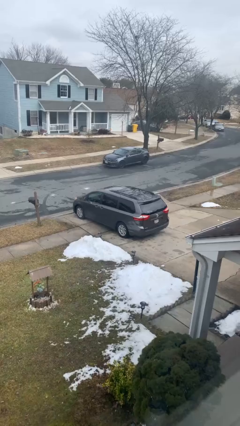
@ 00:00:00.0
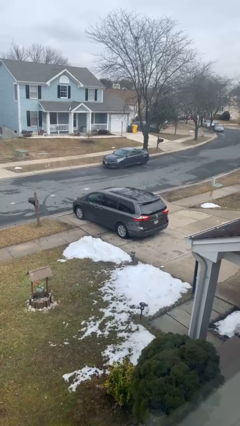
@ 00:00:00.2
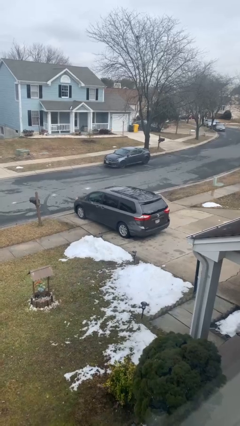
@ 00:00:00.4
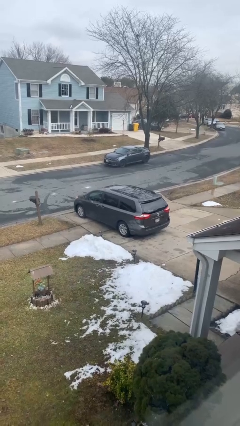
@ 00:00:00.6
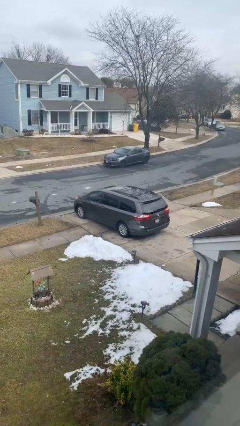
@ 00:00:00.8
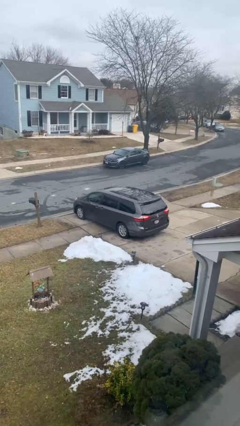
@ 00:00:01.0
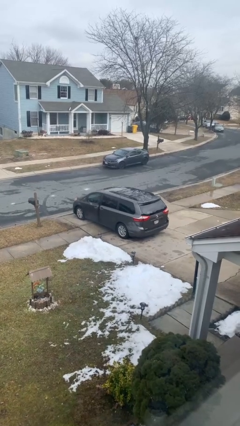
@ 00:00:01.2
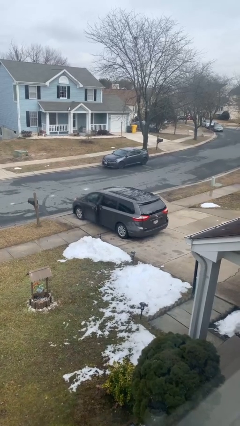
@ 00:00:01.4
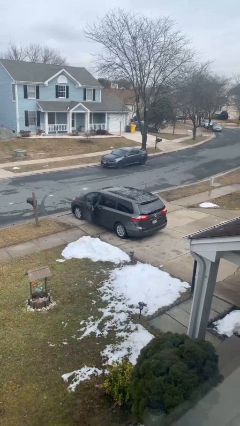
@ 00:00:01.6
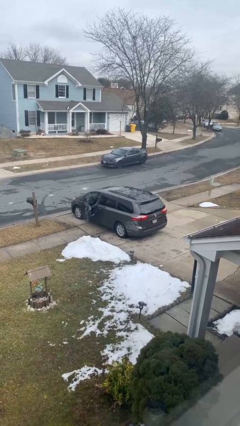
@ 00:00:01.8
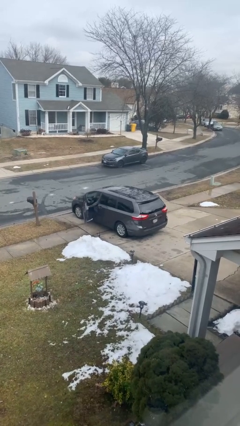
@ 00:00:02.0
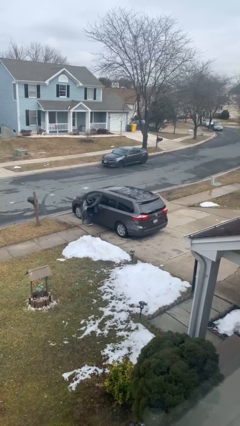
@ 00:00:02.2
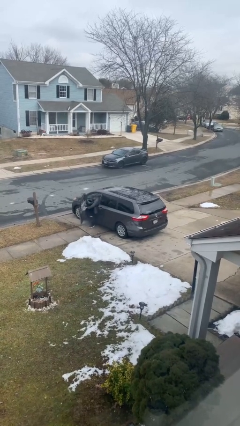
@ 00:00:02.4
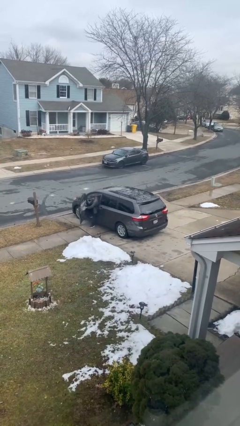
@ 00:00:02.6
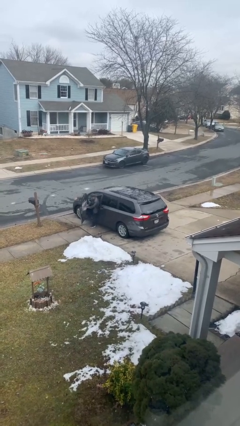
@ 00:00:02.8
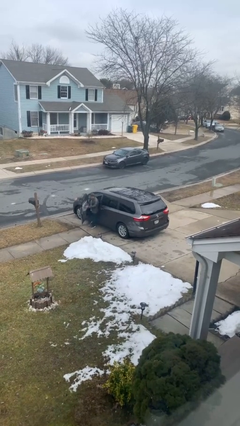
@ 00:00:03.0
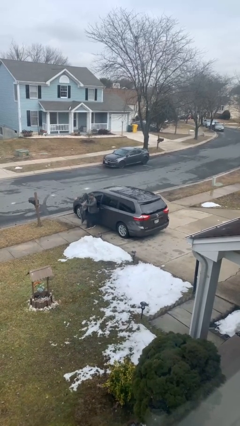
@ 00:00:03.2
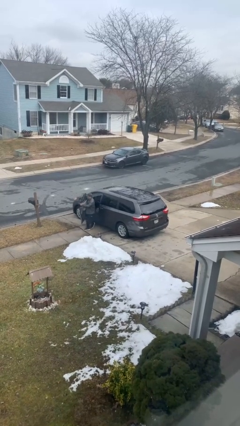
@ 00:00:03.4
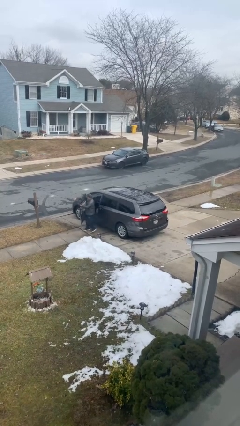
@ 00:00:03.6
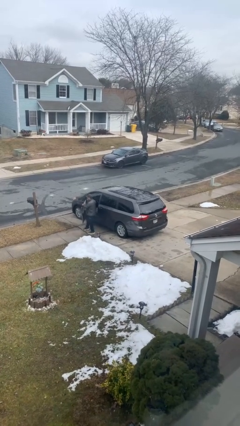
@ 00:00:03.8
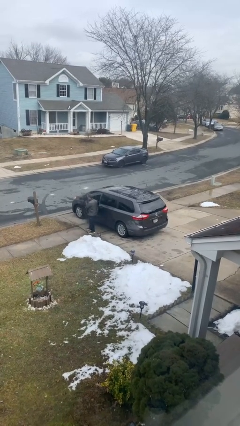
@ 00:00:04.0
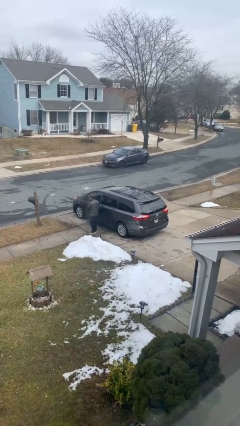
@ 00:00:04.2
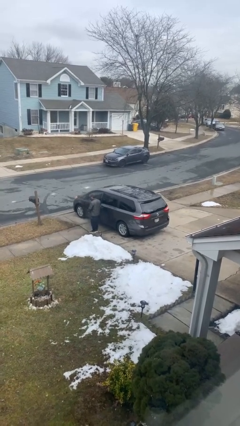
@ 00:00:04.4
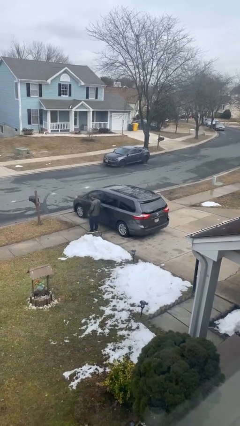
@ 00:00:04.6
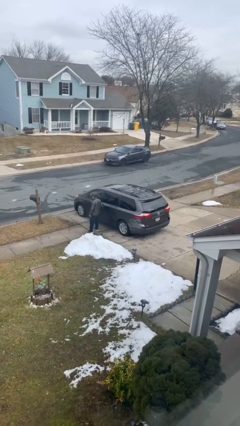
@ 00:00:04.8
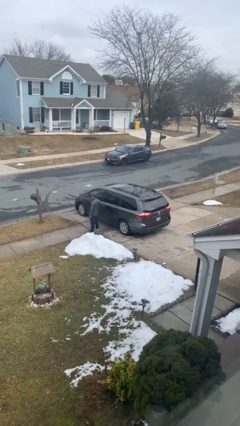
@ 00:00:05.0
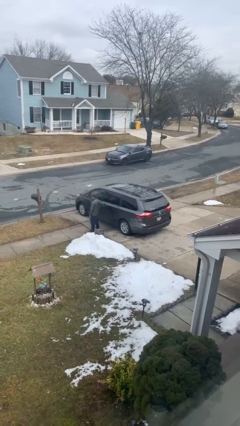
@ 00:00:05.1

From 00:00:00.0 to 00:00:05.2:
car drops off person

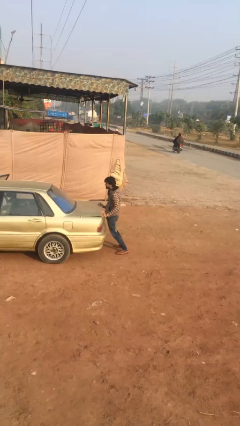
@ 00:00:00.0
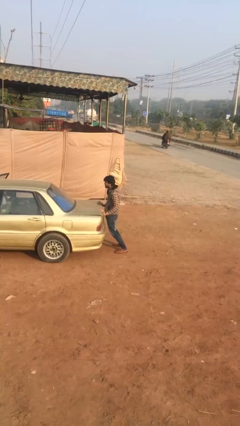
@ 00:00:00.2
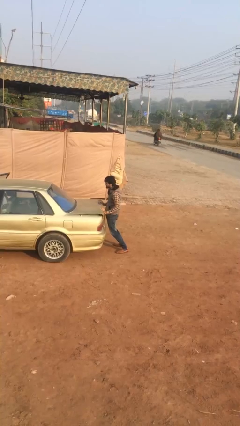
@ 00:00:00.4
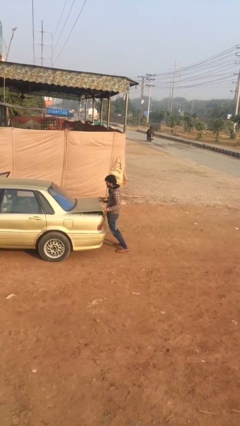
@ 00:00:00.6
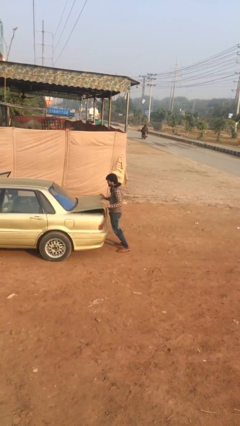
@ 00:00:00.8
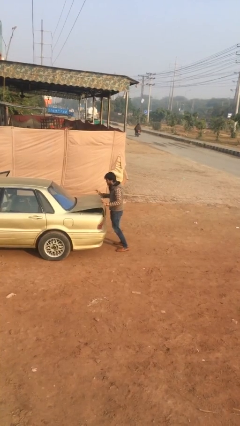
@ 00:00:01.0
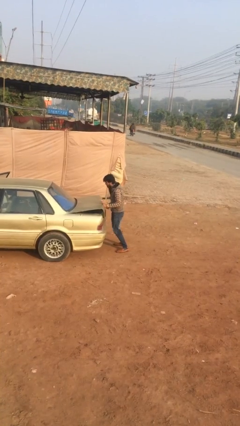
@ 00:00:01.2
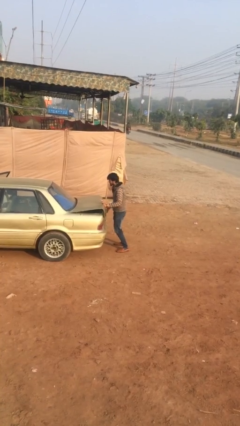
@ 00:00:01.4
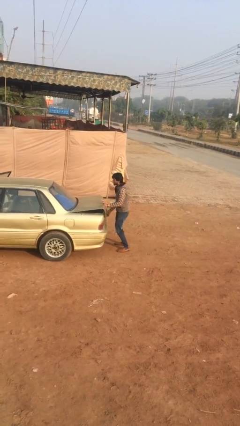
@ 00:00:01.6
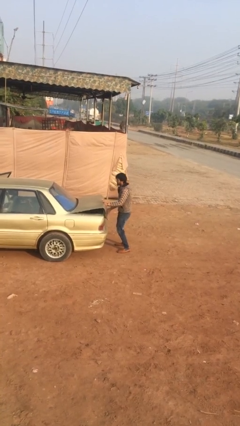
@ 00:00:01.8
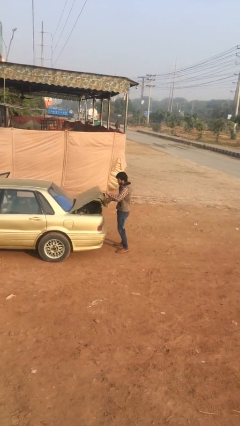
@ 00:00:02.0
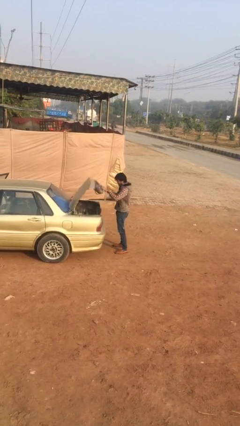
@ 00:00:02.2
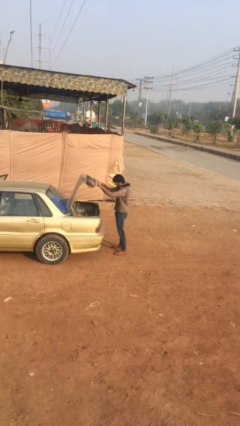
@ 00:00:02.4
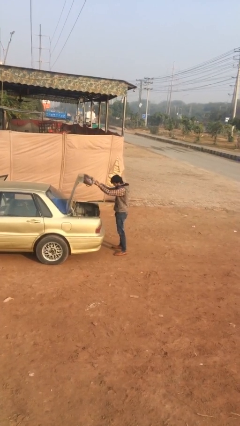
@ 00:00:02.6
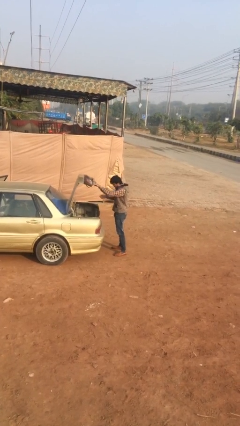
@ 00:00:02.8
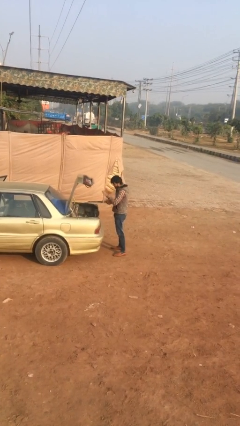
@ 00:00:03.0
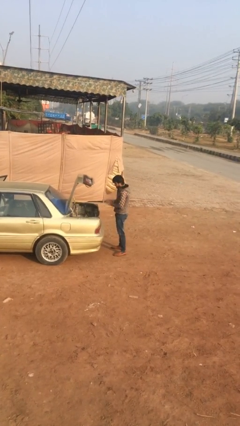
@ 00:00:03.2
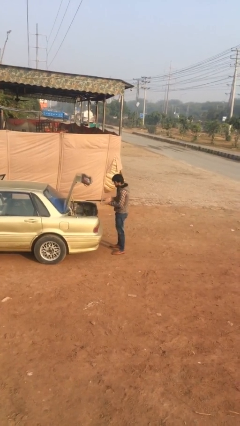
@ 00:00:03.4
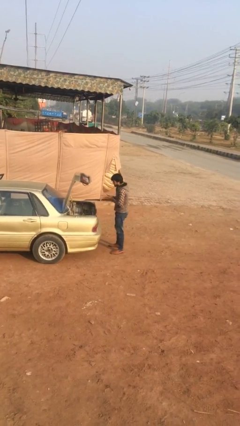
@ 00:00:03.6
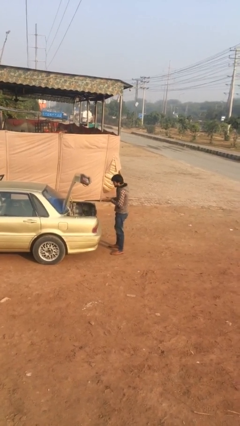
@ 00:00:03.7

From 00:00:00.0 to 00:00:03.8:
person opens car trunk

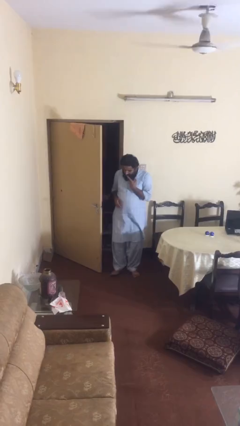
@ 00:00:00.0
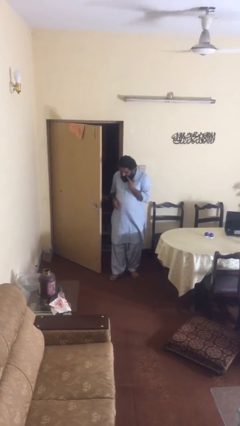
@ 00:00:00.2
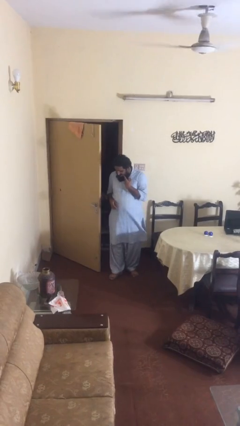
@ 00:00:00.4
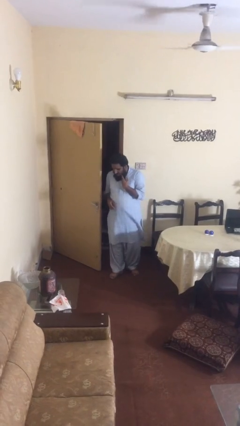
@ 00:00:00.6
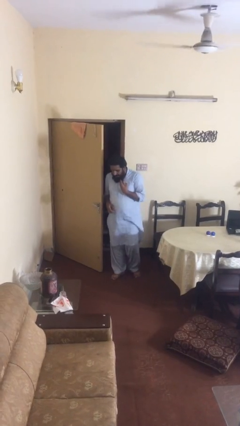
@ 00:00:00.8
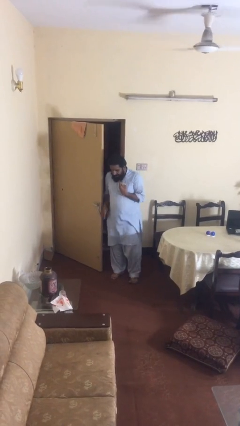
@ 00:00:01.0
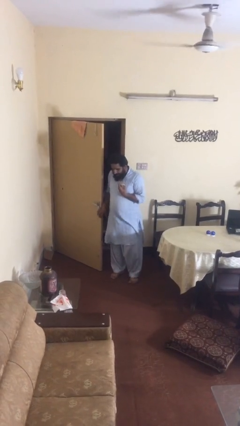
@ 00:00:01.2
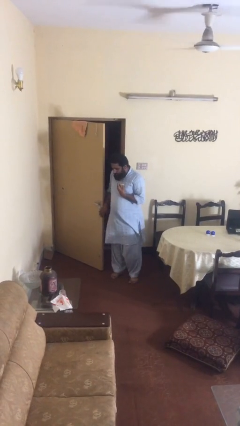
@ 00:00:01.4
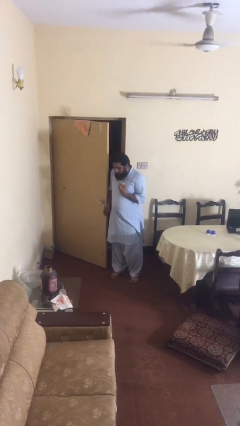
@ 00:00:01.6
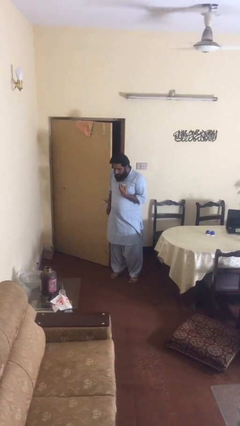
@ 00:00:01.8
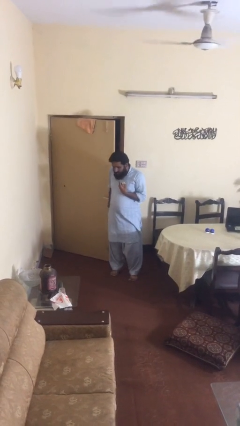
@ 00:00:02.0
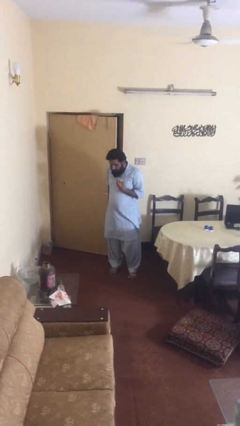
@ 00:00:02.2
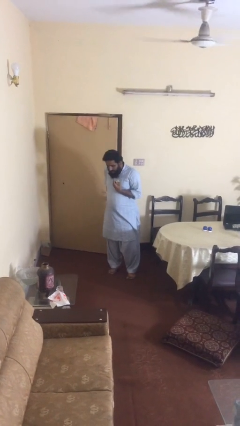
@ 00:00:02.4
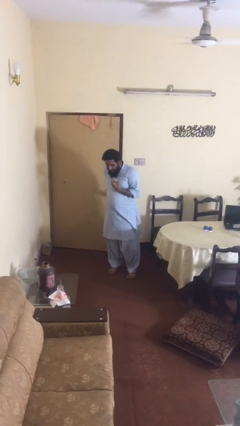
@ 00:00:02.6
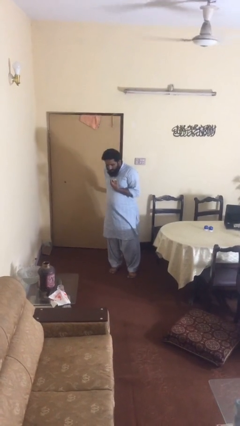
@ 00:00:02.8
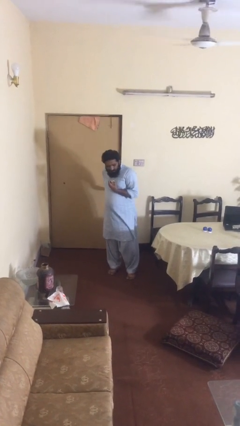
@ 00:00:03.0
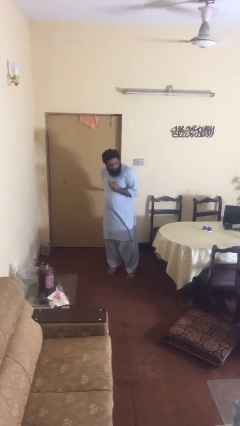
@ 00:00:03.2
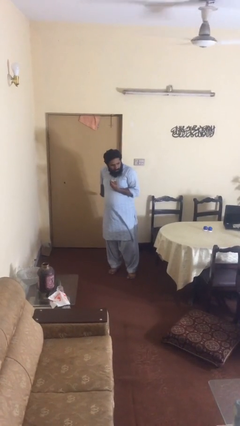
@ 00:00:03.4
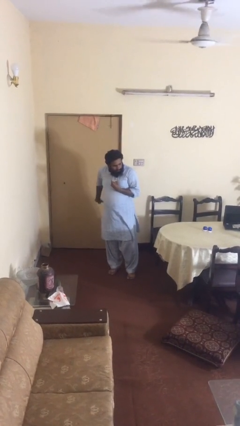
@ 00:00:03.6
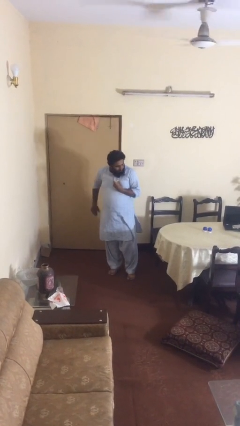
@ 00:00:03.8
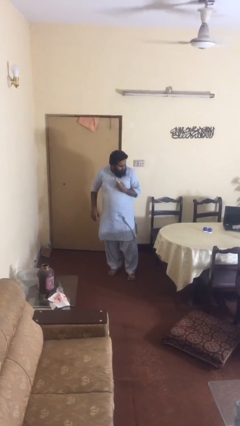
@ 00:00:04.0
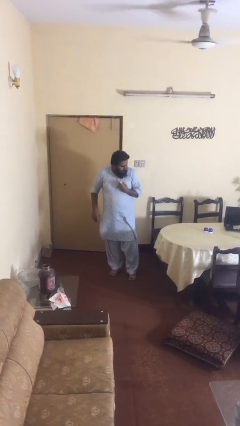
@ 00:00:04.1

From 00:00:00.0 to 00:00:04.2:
person closes facility door

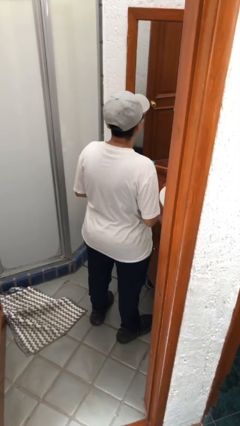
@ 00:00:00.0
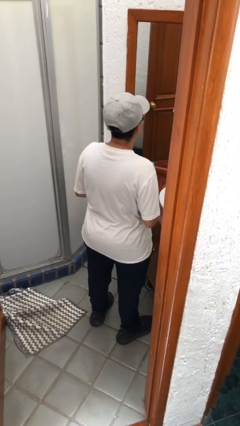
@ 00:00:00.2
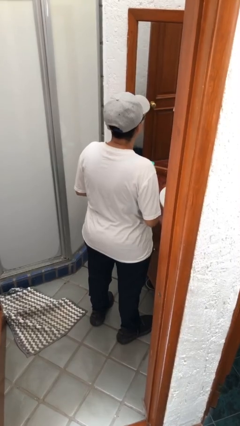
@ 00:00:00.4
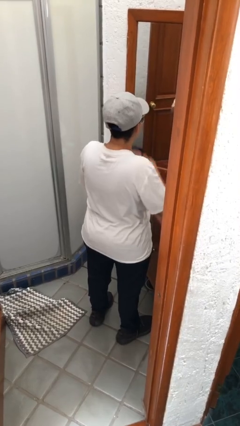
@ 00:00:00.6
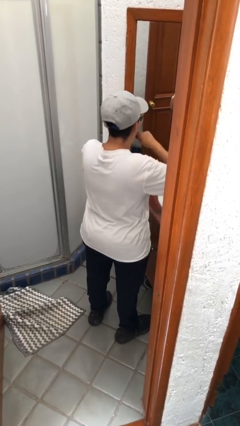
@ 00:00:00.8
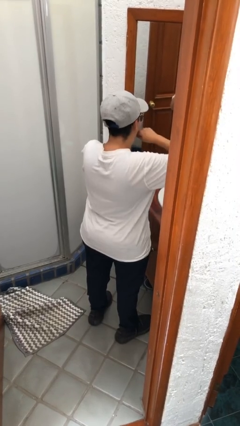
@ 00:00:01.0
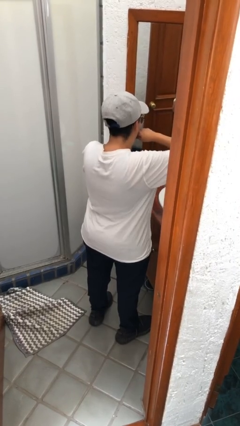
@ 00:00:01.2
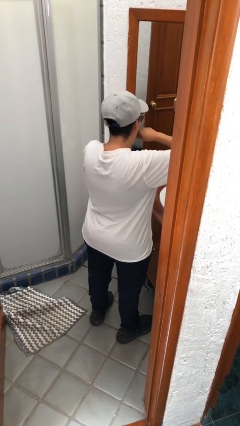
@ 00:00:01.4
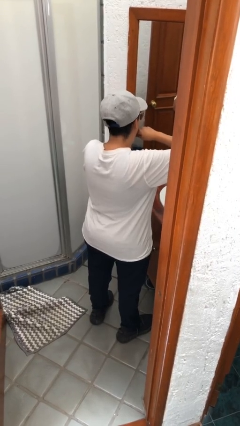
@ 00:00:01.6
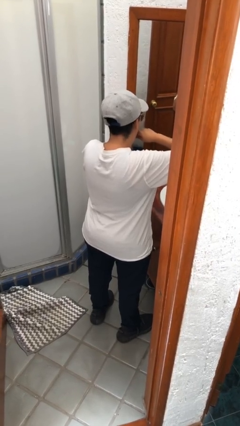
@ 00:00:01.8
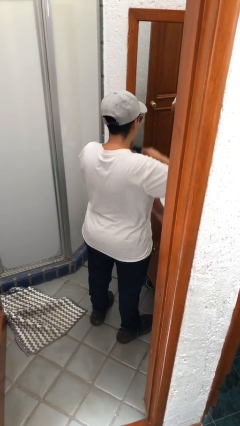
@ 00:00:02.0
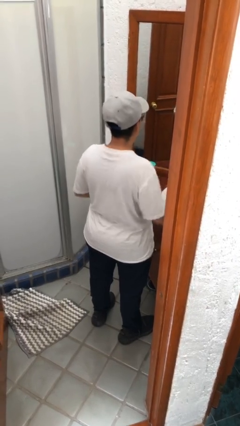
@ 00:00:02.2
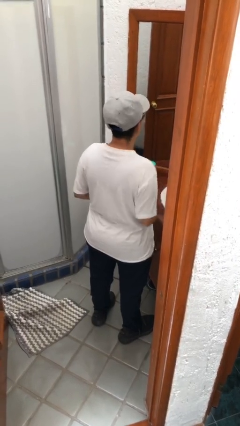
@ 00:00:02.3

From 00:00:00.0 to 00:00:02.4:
person flosses

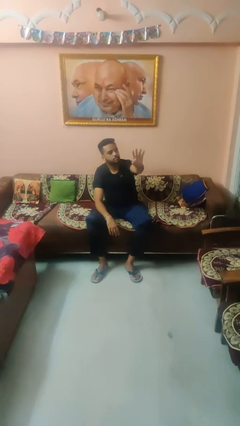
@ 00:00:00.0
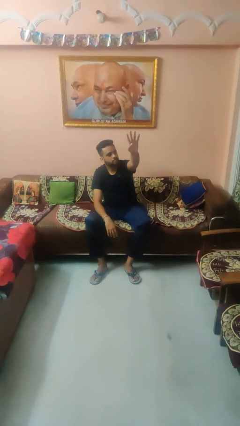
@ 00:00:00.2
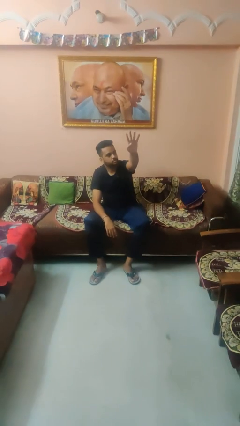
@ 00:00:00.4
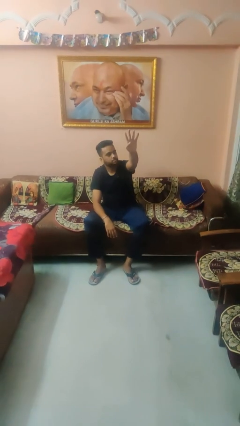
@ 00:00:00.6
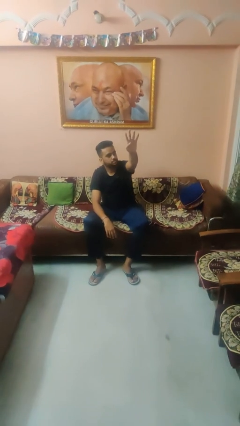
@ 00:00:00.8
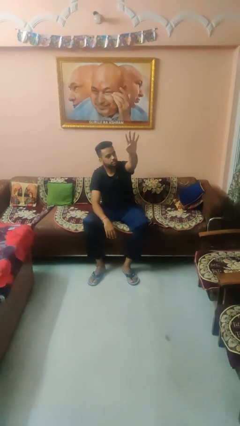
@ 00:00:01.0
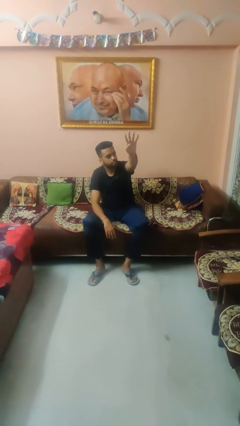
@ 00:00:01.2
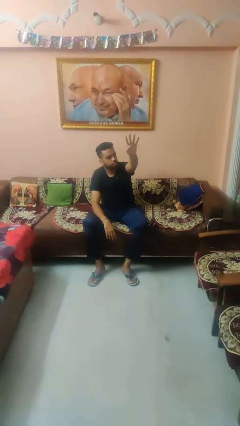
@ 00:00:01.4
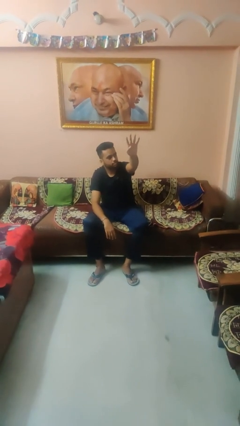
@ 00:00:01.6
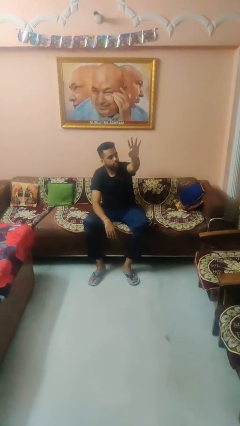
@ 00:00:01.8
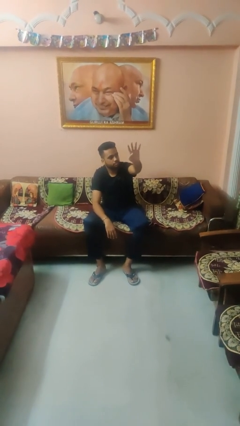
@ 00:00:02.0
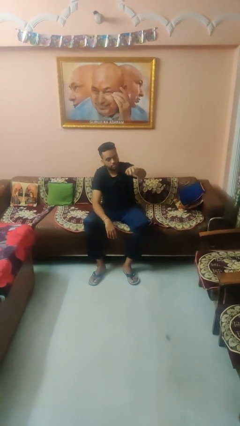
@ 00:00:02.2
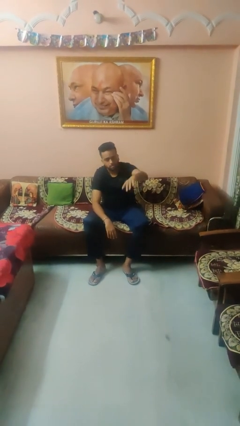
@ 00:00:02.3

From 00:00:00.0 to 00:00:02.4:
person gestures number four
